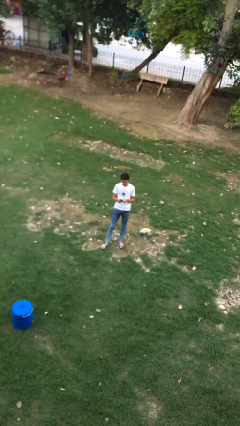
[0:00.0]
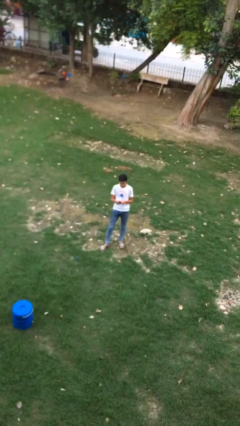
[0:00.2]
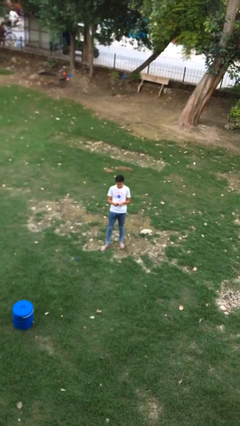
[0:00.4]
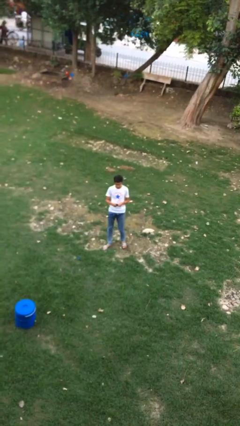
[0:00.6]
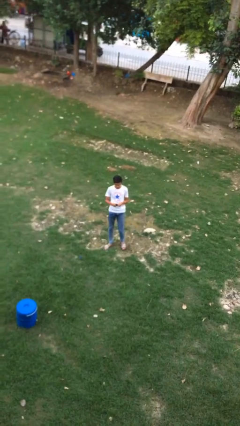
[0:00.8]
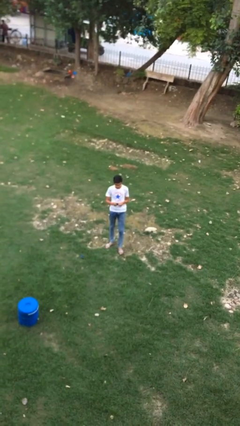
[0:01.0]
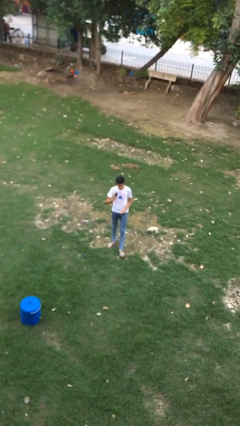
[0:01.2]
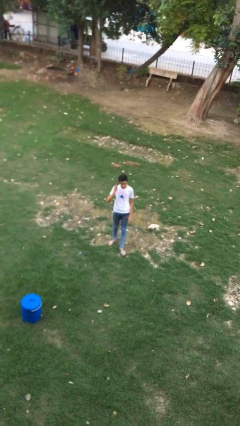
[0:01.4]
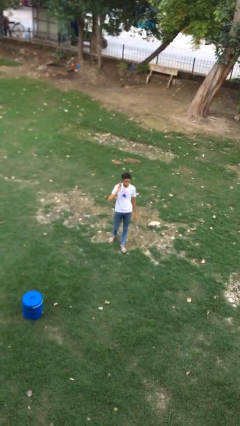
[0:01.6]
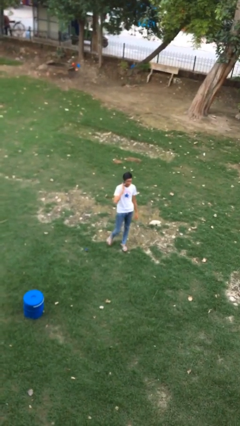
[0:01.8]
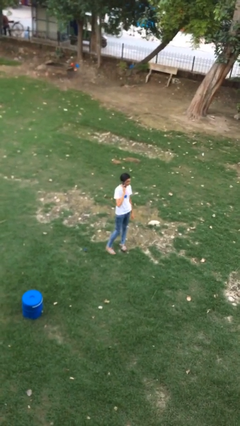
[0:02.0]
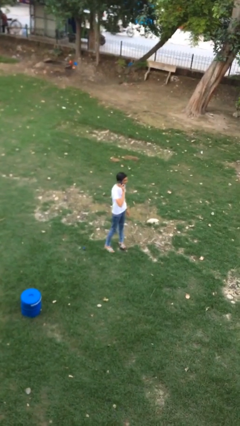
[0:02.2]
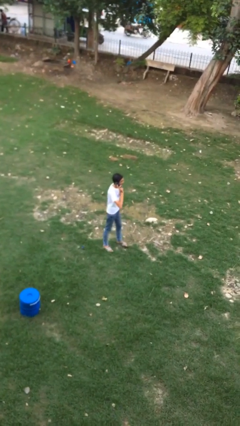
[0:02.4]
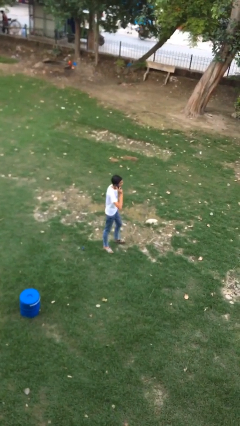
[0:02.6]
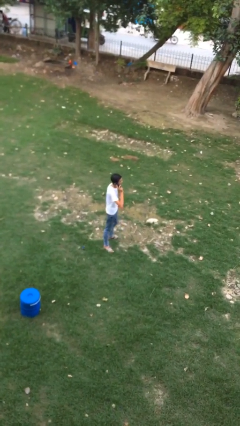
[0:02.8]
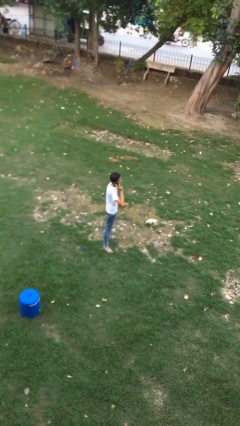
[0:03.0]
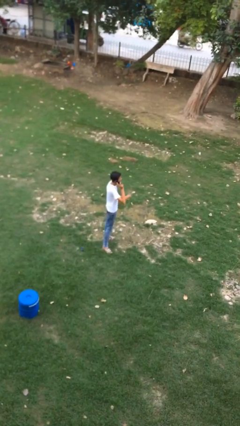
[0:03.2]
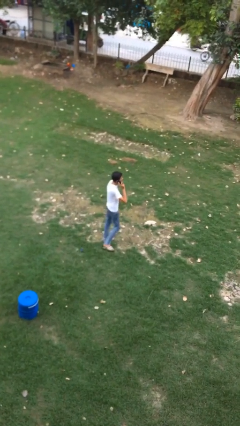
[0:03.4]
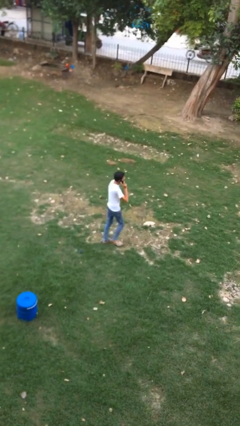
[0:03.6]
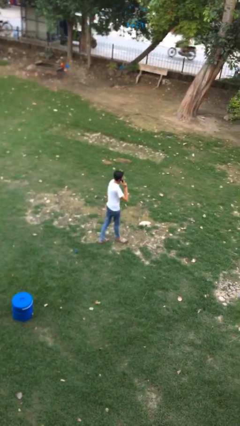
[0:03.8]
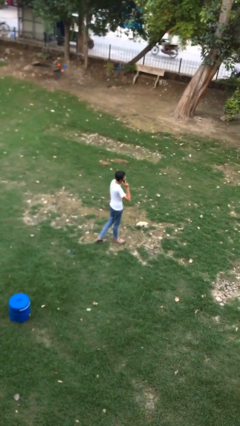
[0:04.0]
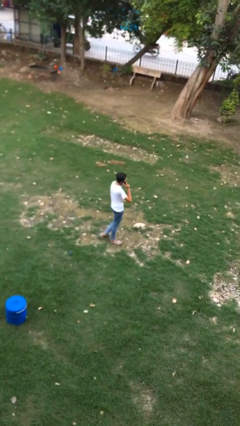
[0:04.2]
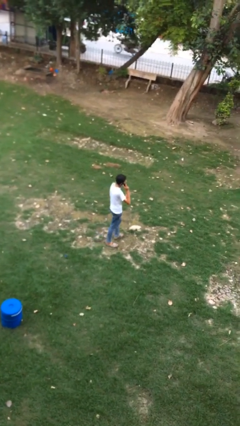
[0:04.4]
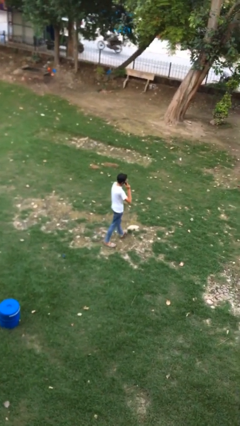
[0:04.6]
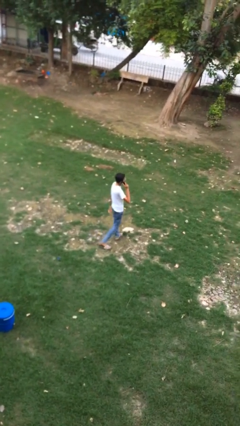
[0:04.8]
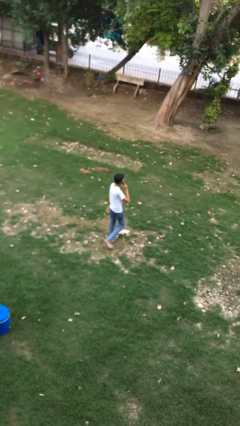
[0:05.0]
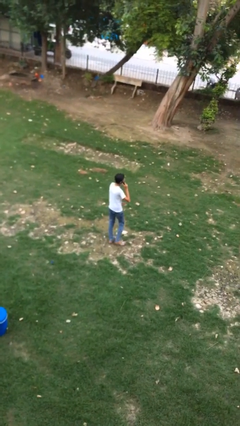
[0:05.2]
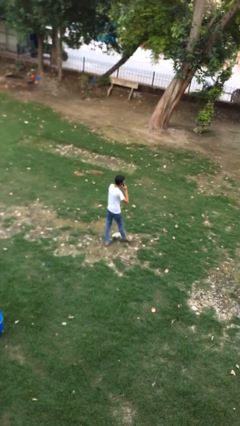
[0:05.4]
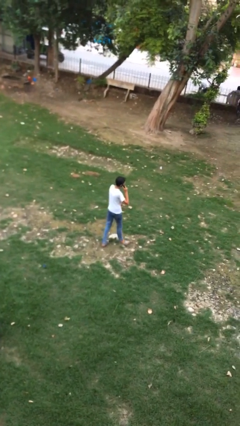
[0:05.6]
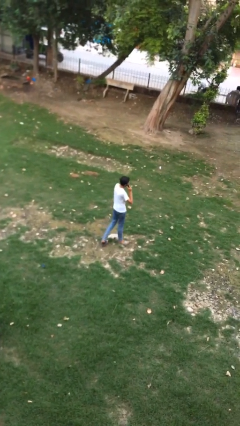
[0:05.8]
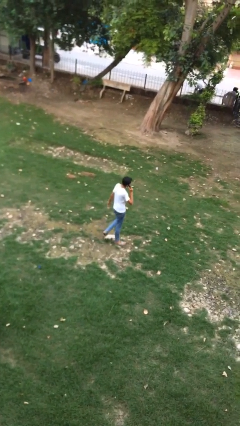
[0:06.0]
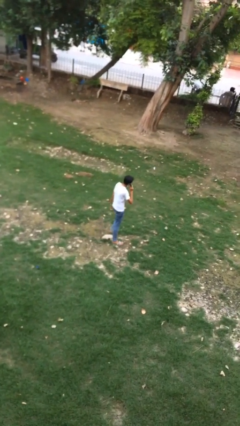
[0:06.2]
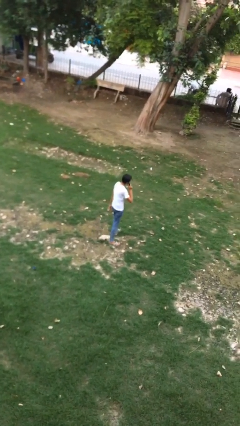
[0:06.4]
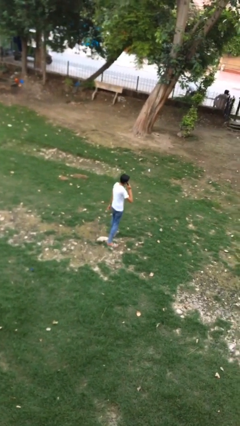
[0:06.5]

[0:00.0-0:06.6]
person talks on phone

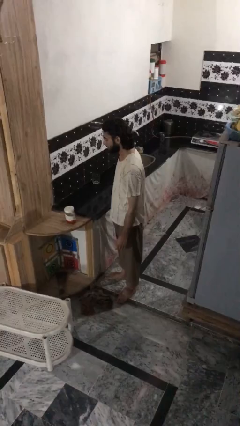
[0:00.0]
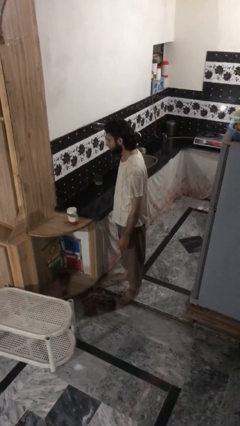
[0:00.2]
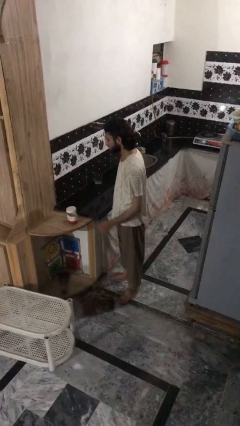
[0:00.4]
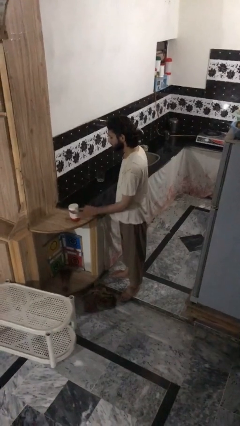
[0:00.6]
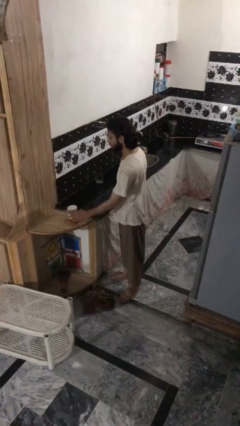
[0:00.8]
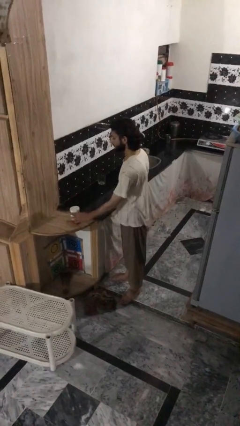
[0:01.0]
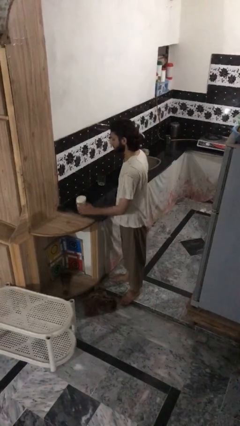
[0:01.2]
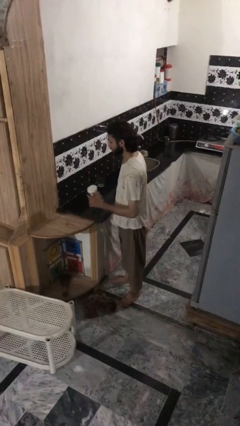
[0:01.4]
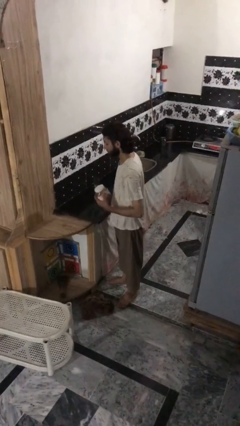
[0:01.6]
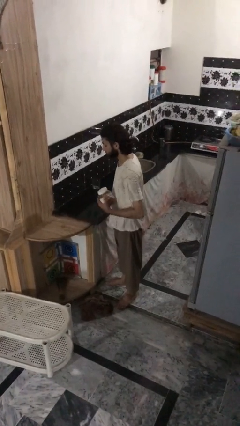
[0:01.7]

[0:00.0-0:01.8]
person picks up object from countertop

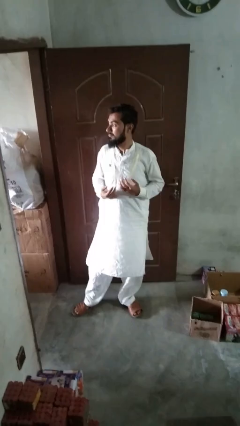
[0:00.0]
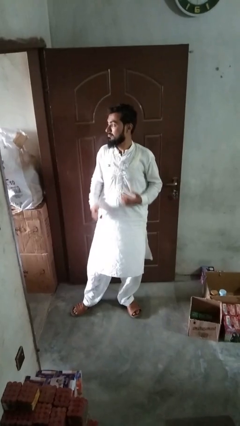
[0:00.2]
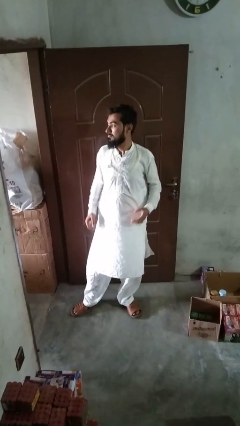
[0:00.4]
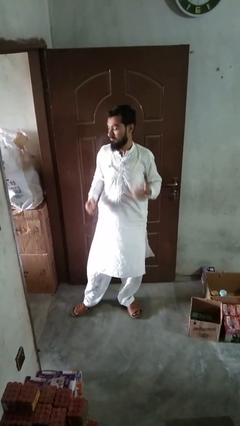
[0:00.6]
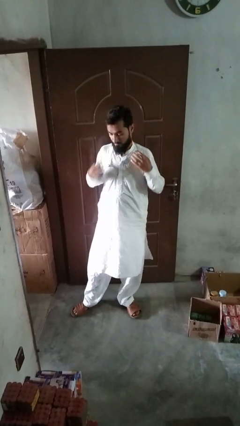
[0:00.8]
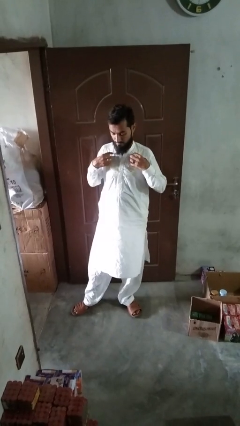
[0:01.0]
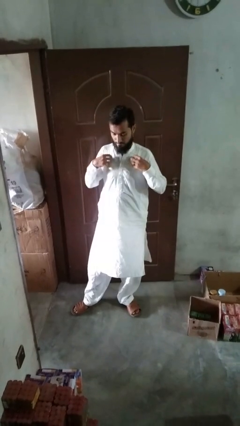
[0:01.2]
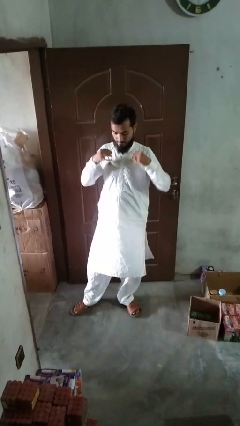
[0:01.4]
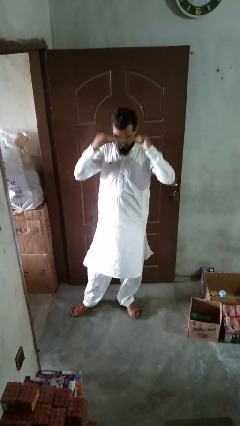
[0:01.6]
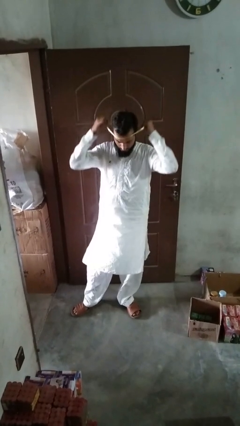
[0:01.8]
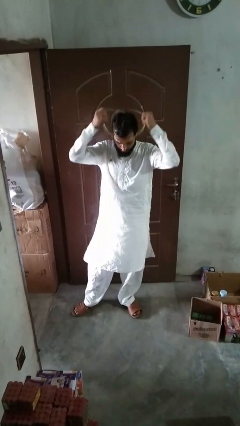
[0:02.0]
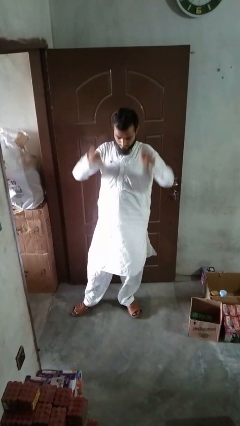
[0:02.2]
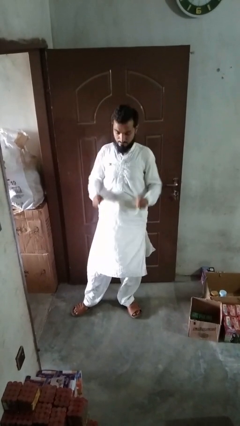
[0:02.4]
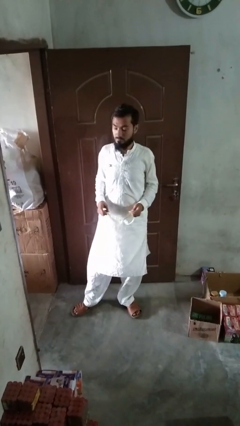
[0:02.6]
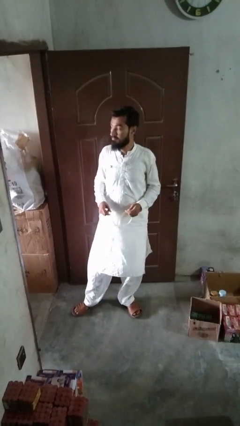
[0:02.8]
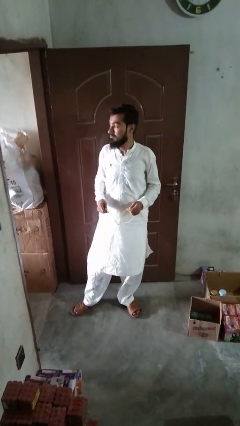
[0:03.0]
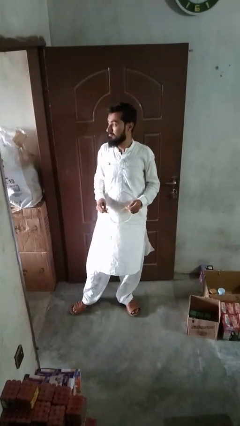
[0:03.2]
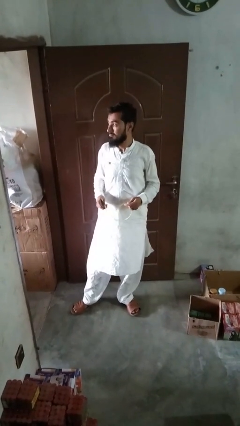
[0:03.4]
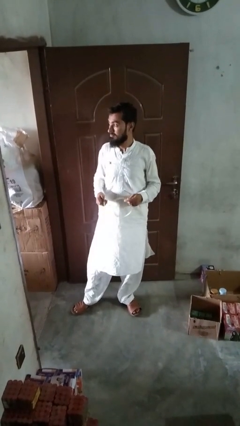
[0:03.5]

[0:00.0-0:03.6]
person takes off necklace

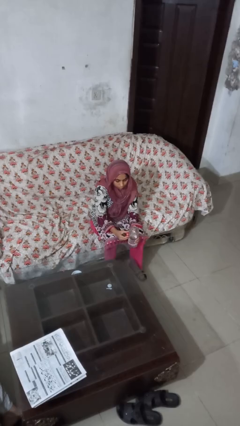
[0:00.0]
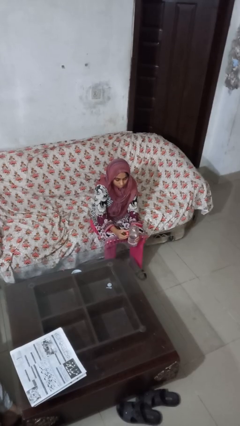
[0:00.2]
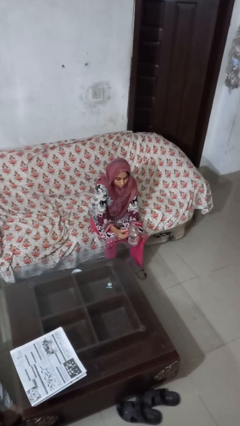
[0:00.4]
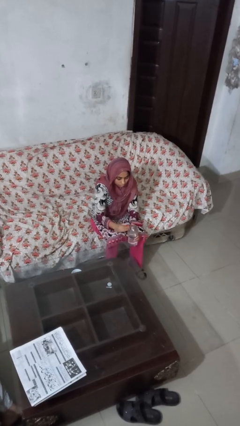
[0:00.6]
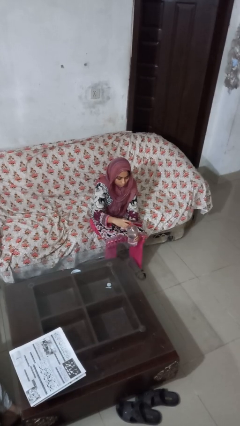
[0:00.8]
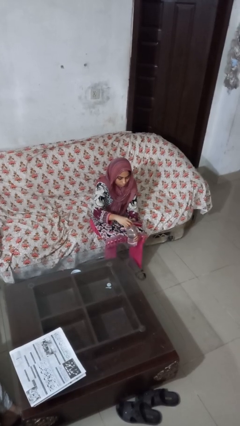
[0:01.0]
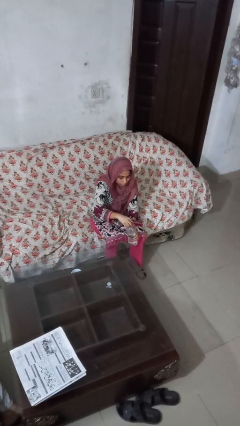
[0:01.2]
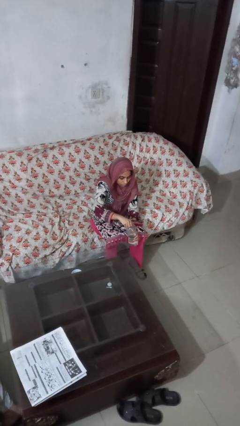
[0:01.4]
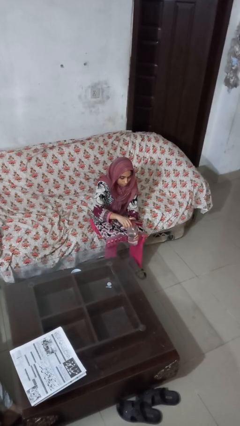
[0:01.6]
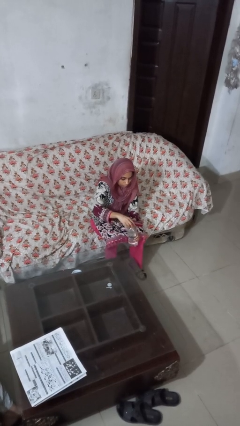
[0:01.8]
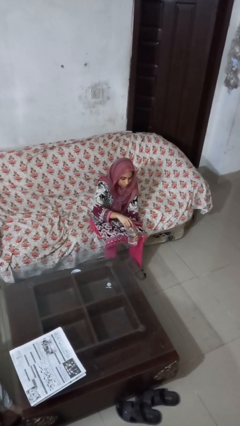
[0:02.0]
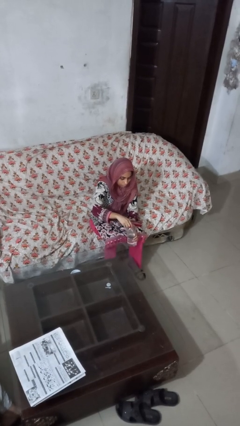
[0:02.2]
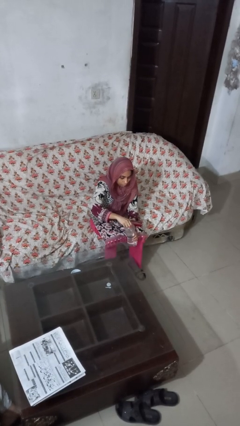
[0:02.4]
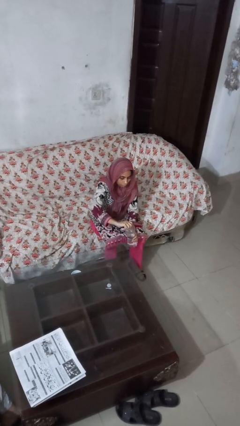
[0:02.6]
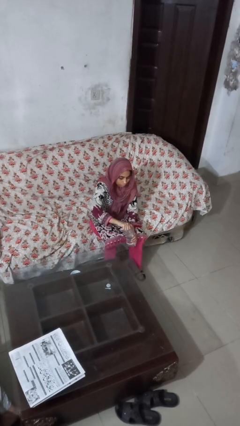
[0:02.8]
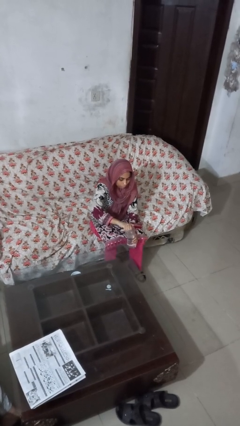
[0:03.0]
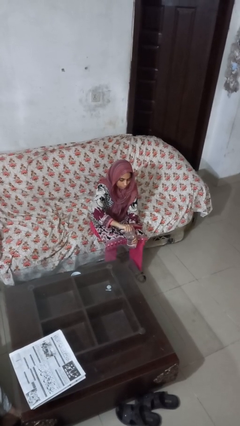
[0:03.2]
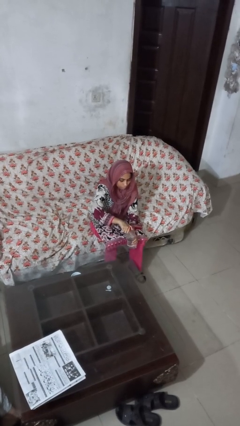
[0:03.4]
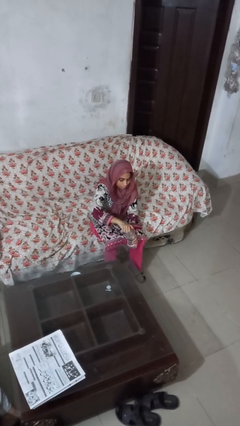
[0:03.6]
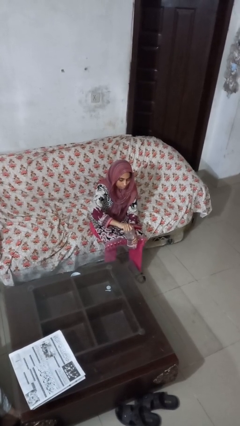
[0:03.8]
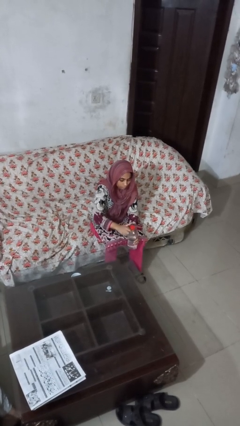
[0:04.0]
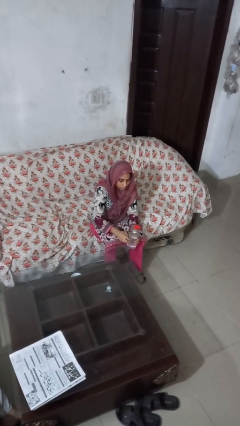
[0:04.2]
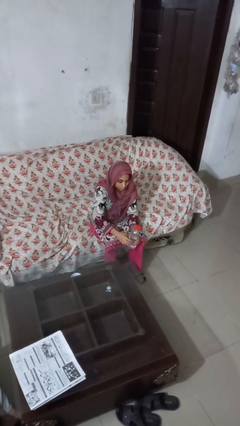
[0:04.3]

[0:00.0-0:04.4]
person screws lid to bottle

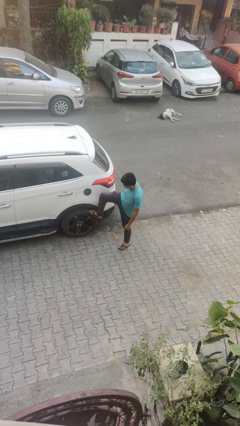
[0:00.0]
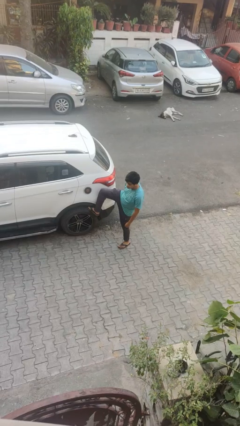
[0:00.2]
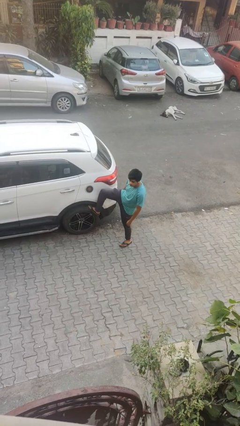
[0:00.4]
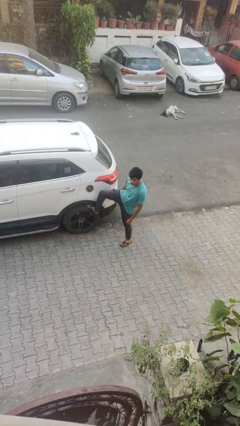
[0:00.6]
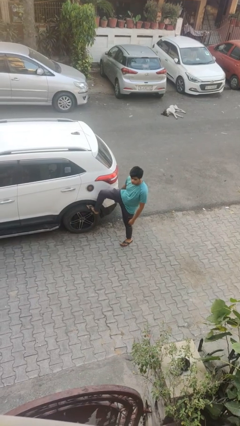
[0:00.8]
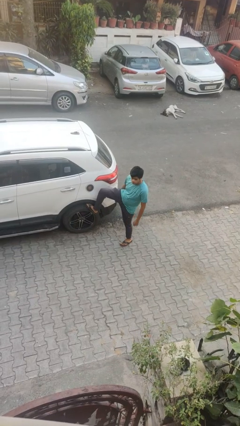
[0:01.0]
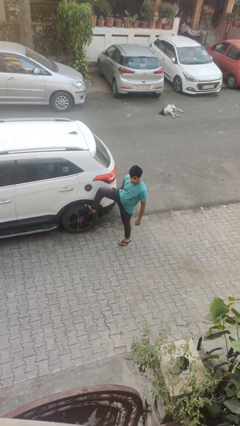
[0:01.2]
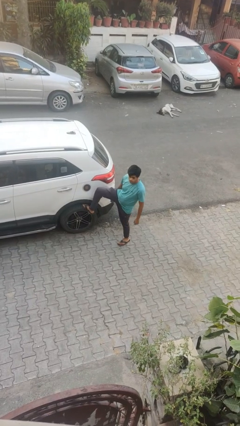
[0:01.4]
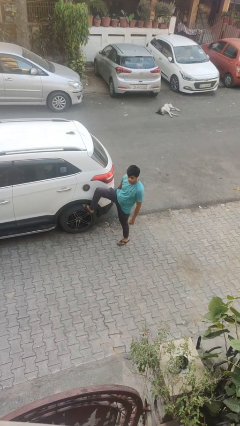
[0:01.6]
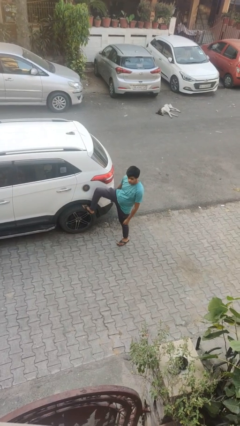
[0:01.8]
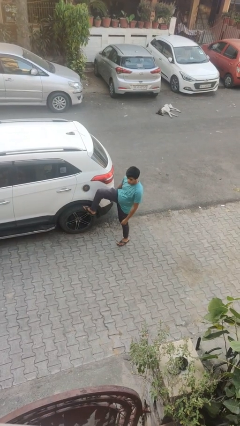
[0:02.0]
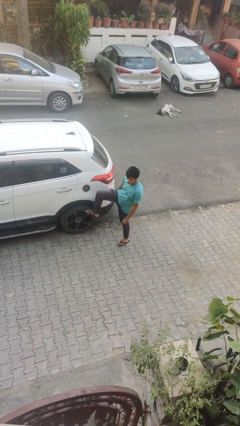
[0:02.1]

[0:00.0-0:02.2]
person kicks car tires
